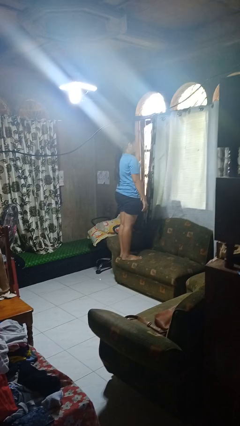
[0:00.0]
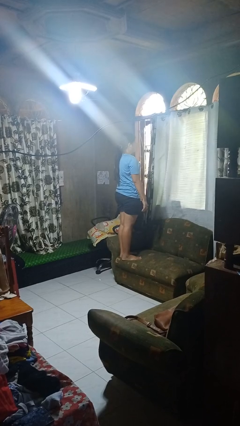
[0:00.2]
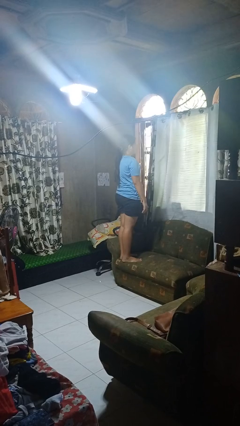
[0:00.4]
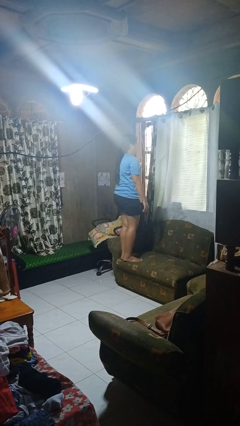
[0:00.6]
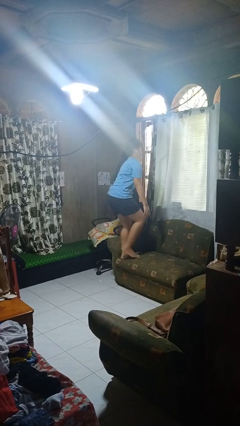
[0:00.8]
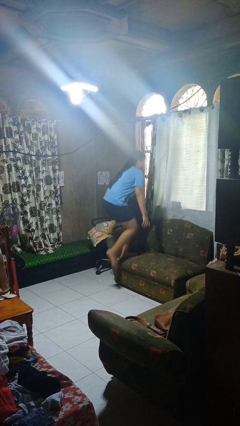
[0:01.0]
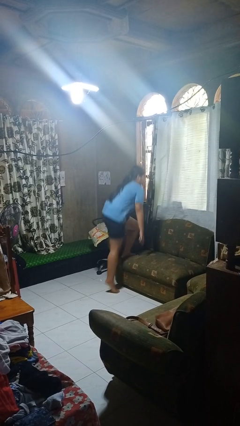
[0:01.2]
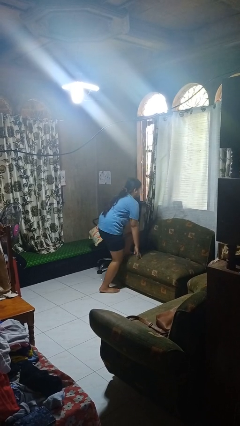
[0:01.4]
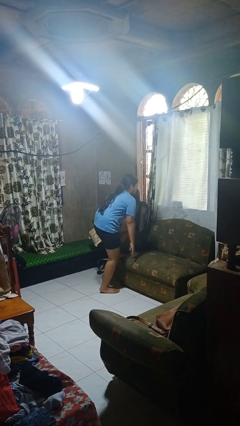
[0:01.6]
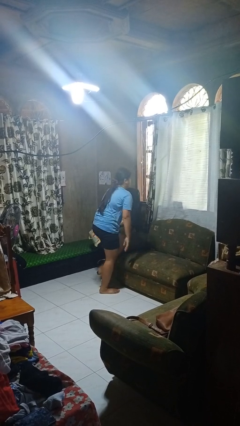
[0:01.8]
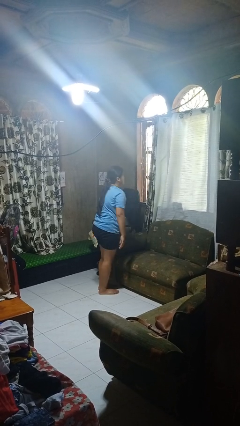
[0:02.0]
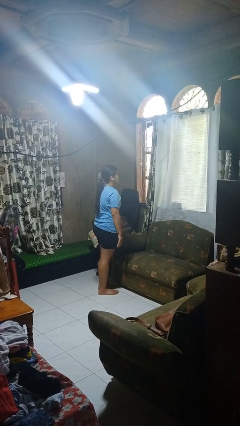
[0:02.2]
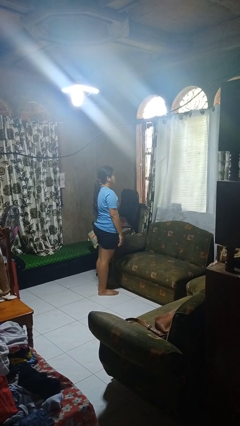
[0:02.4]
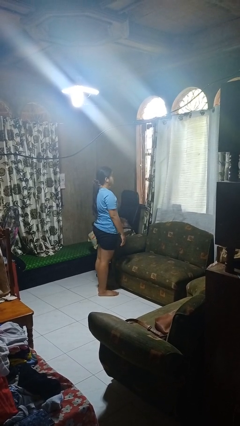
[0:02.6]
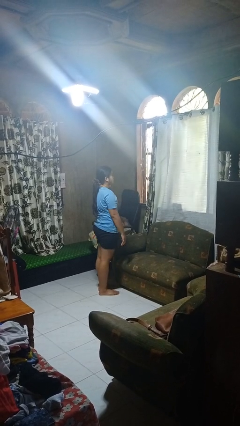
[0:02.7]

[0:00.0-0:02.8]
person climbs off couch

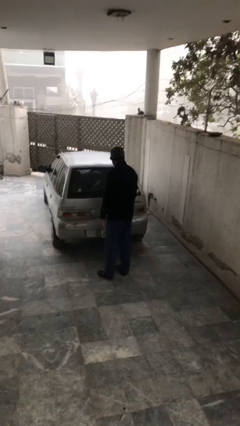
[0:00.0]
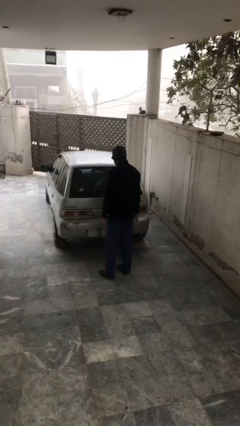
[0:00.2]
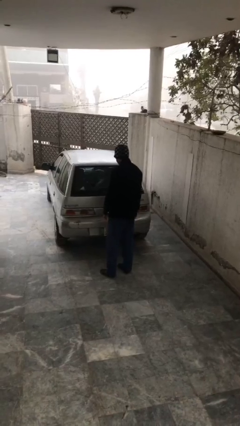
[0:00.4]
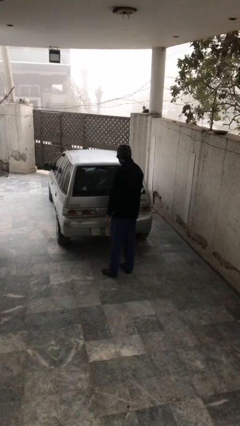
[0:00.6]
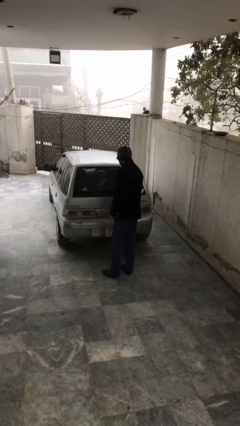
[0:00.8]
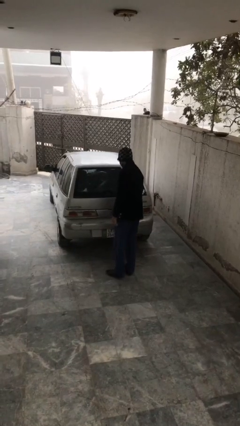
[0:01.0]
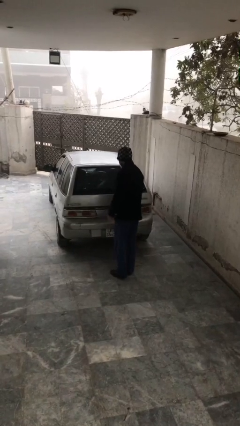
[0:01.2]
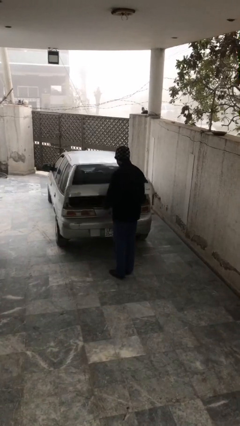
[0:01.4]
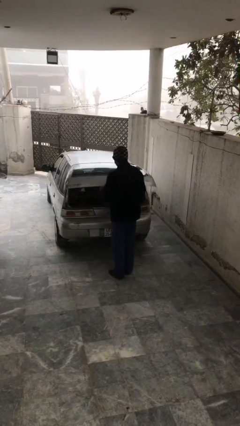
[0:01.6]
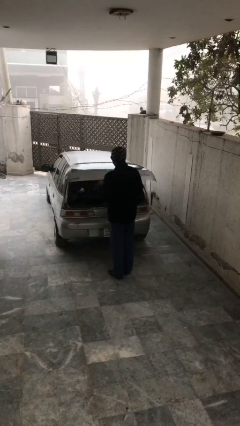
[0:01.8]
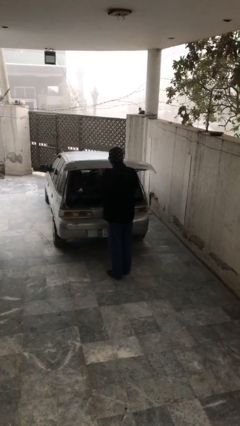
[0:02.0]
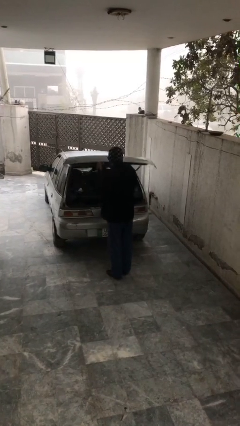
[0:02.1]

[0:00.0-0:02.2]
person opens car trunk

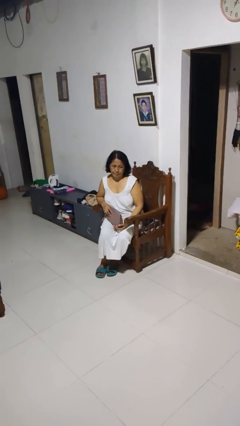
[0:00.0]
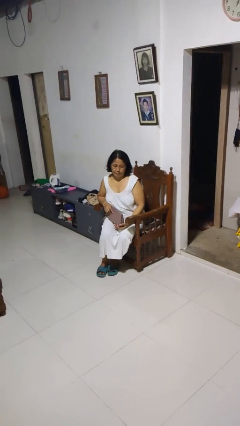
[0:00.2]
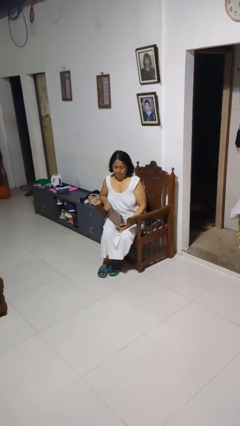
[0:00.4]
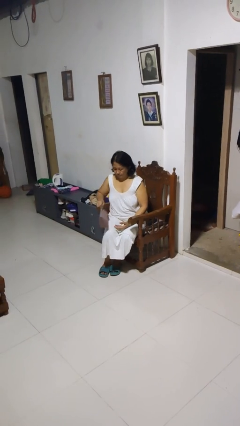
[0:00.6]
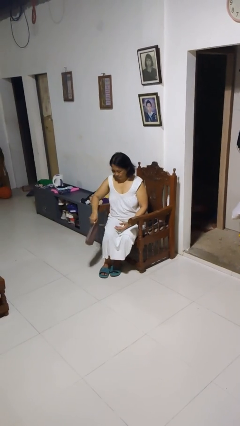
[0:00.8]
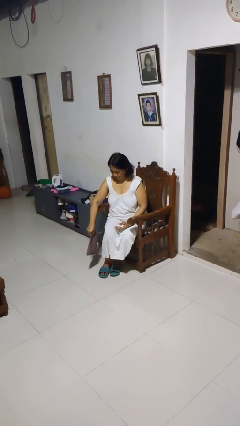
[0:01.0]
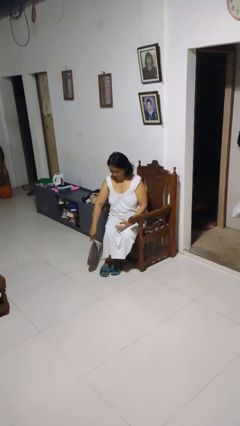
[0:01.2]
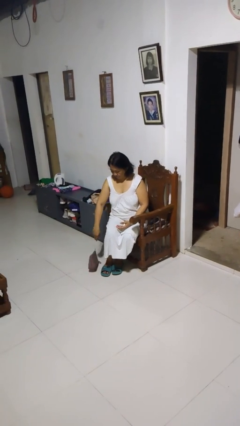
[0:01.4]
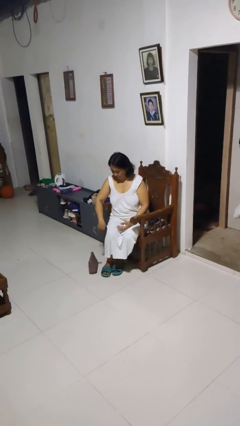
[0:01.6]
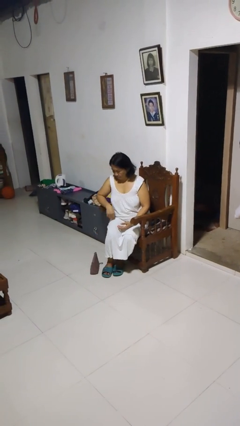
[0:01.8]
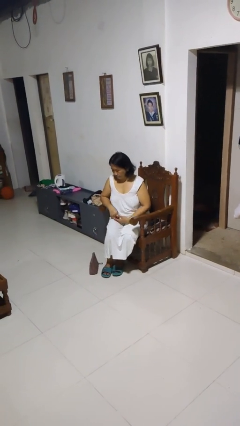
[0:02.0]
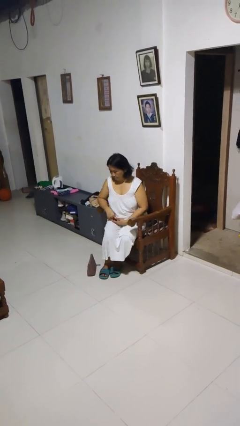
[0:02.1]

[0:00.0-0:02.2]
person drops object

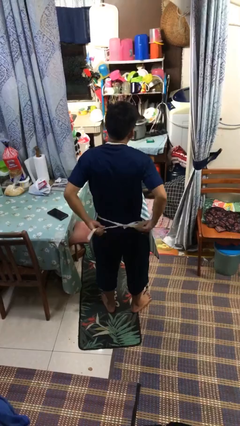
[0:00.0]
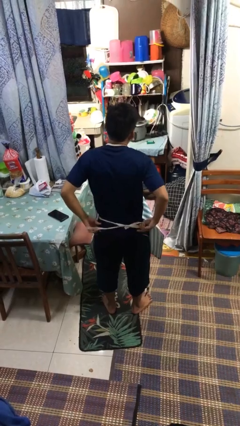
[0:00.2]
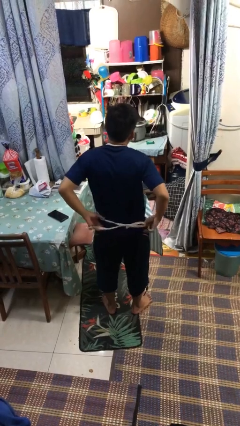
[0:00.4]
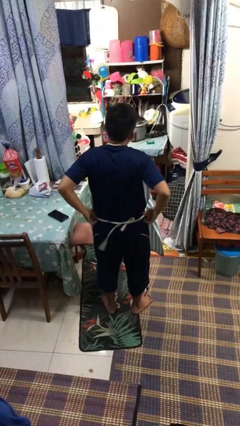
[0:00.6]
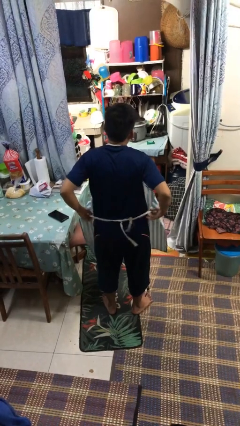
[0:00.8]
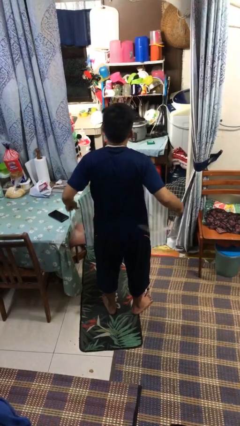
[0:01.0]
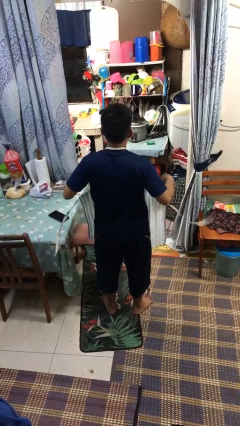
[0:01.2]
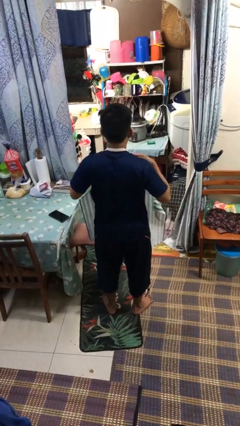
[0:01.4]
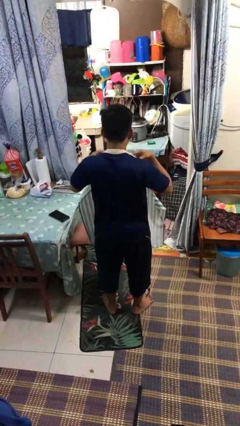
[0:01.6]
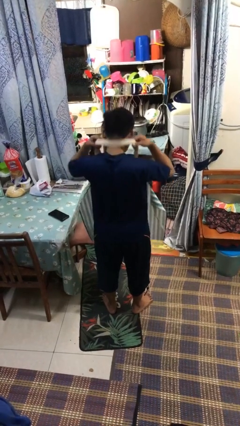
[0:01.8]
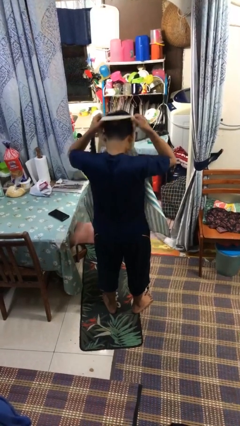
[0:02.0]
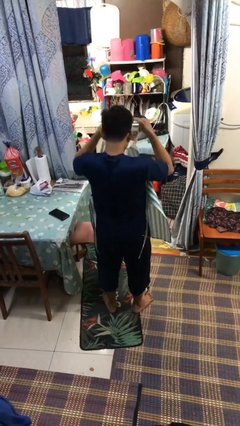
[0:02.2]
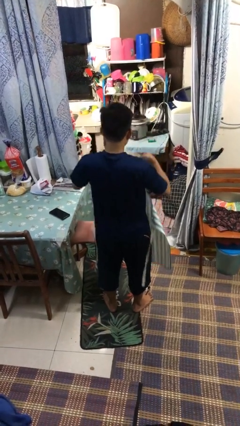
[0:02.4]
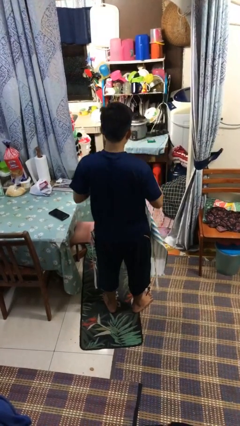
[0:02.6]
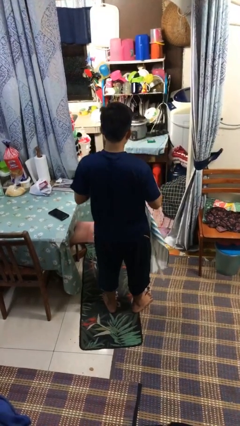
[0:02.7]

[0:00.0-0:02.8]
person takes off apron

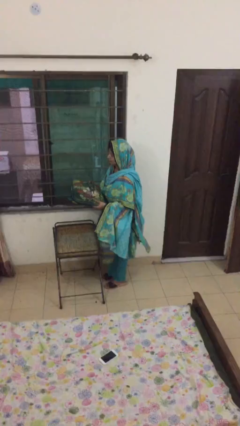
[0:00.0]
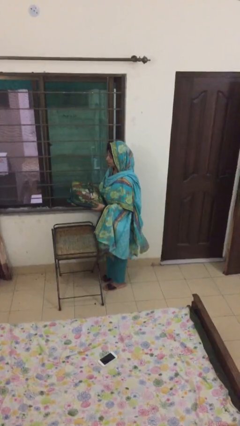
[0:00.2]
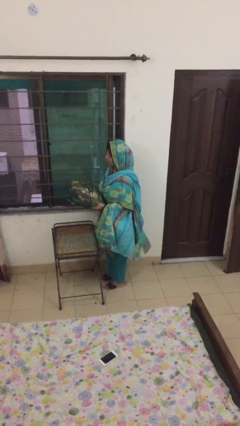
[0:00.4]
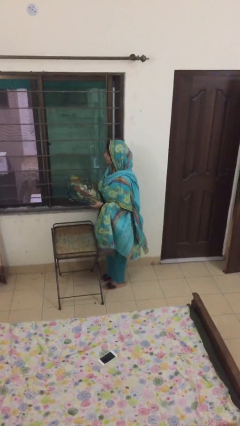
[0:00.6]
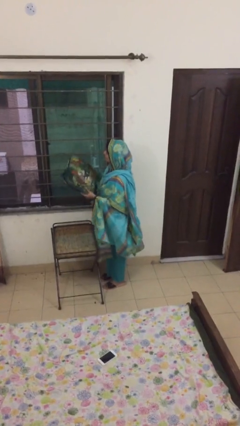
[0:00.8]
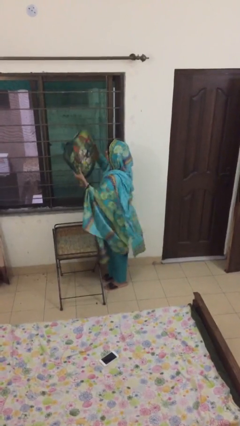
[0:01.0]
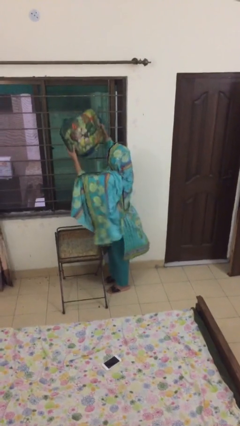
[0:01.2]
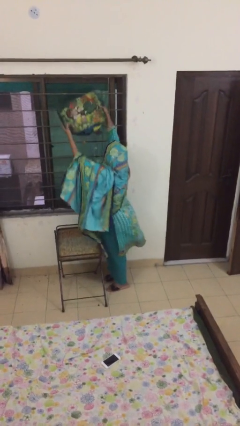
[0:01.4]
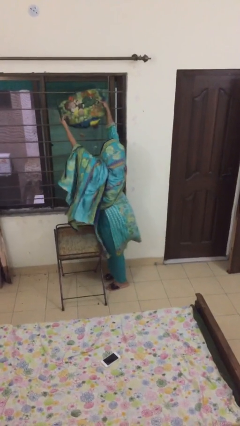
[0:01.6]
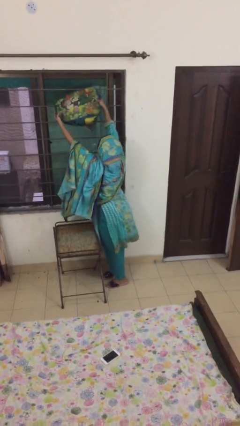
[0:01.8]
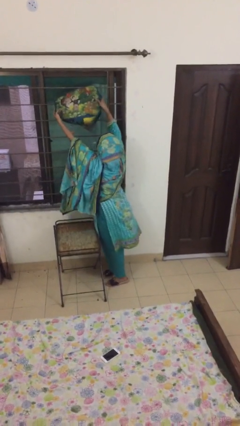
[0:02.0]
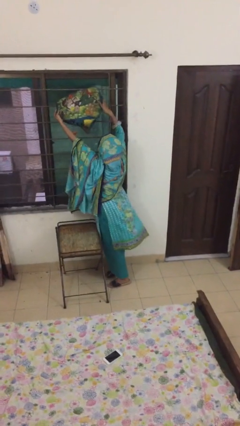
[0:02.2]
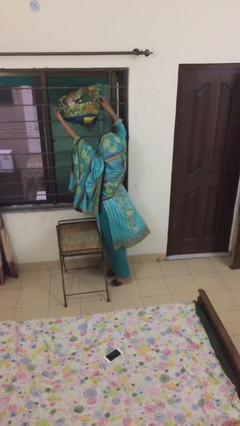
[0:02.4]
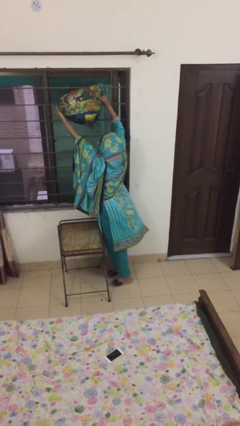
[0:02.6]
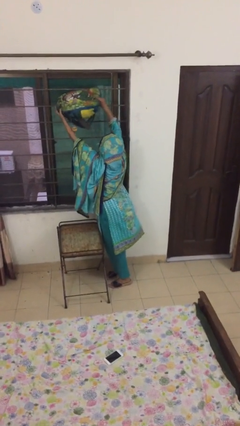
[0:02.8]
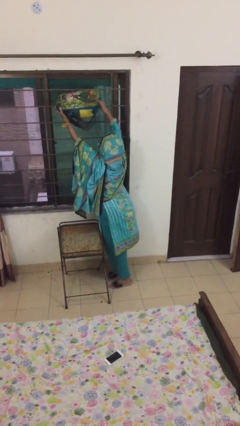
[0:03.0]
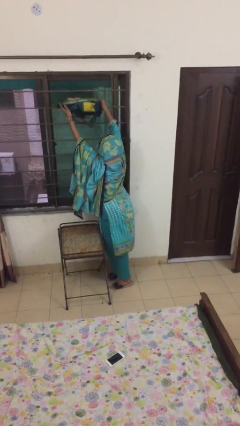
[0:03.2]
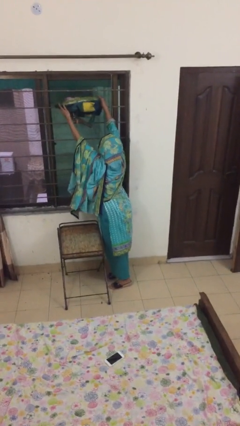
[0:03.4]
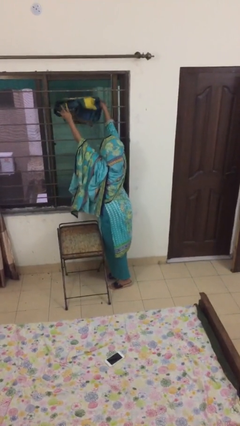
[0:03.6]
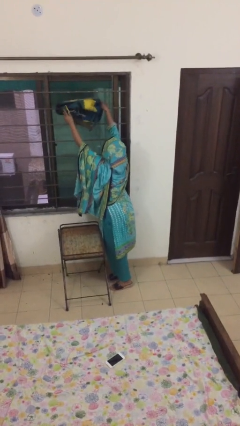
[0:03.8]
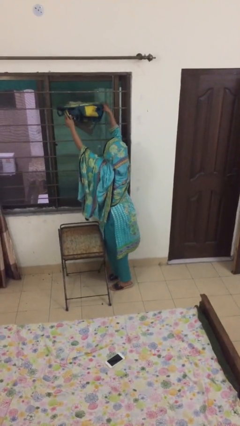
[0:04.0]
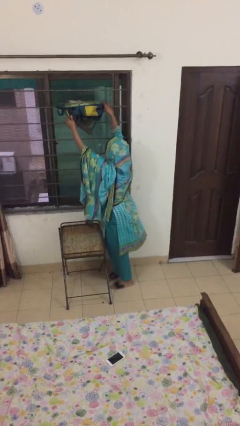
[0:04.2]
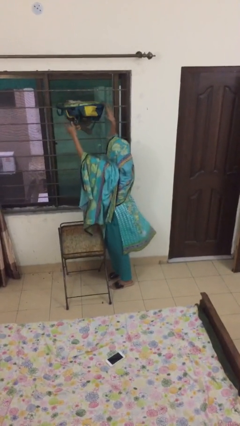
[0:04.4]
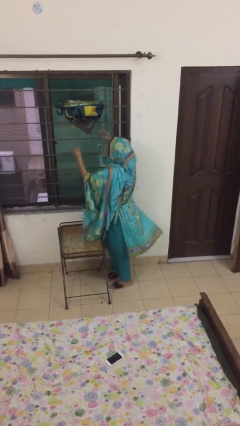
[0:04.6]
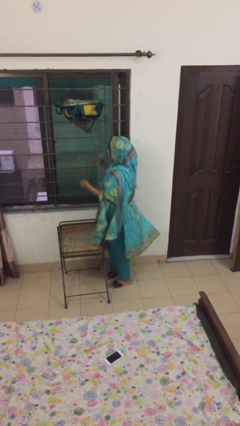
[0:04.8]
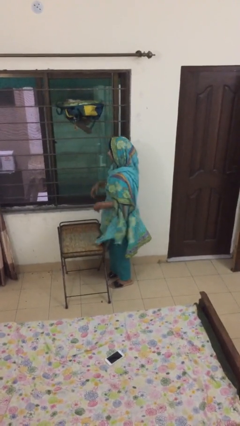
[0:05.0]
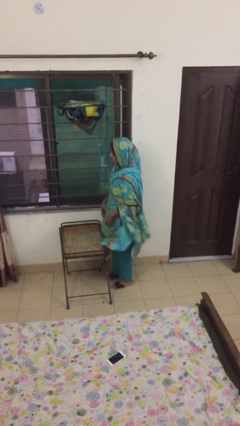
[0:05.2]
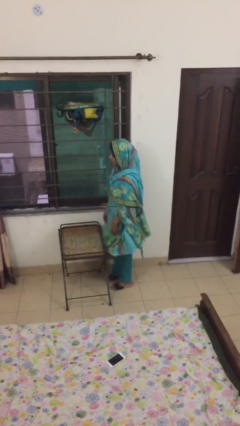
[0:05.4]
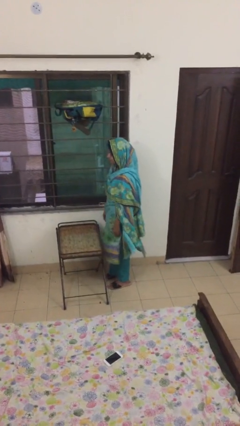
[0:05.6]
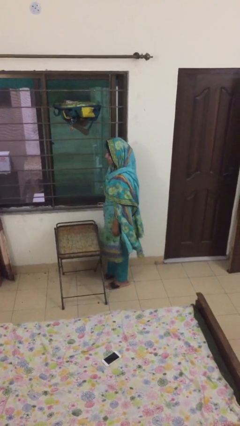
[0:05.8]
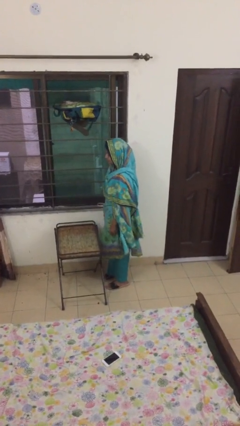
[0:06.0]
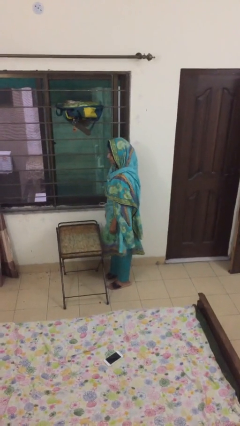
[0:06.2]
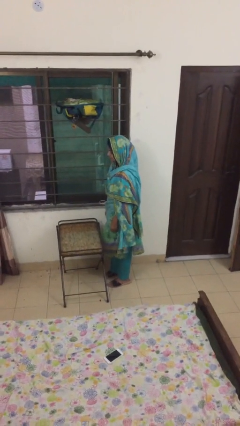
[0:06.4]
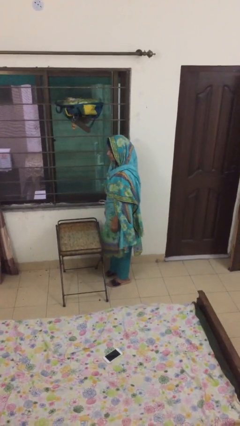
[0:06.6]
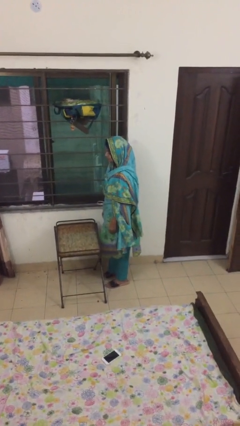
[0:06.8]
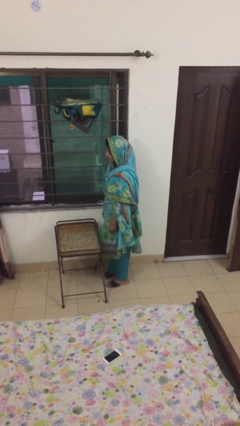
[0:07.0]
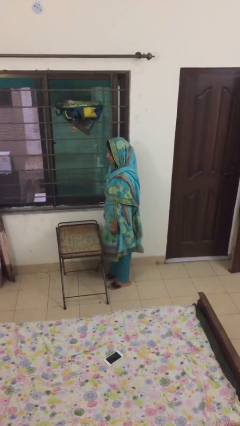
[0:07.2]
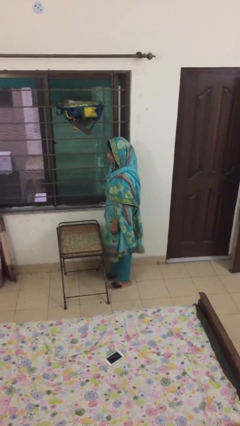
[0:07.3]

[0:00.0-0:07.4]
person puts down object on shelf
